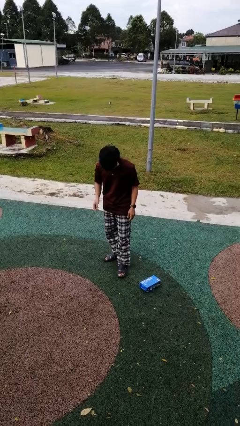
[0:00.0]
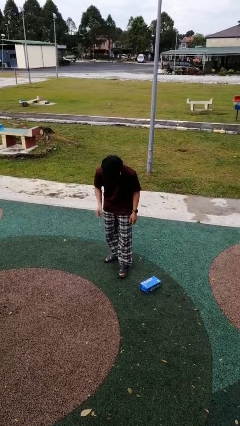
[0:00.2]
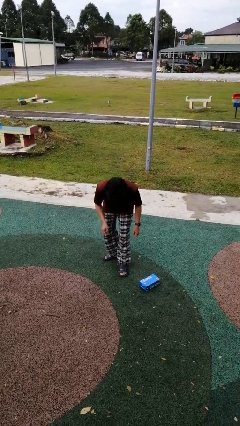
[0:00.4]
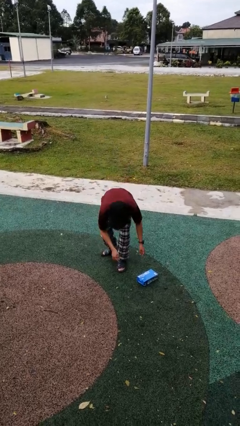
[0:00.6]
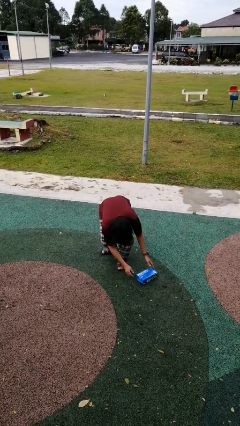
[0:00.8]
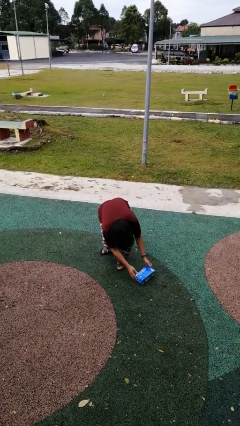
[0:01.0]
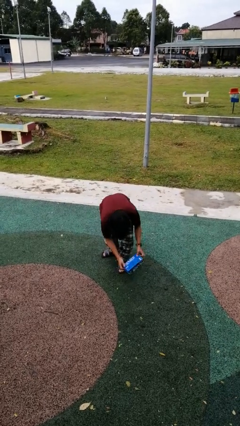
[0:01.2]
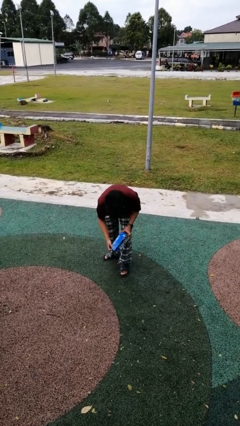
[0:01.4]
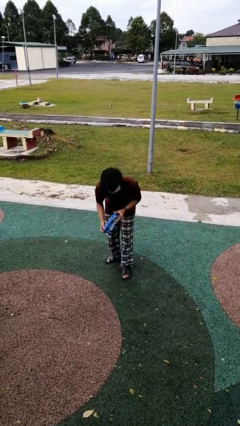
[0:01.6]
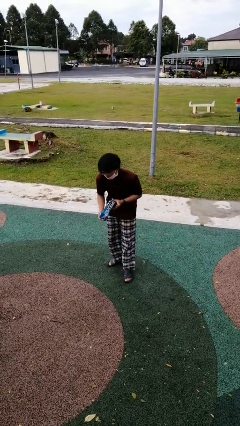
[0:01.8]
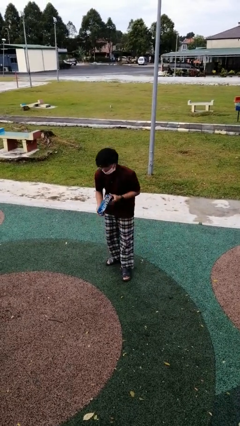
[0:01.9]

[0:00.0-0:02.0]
person picks up object from floor

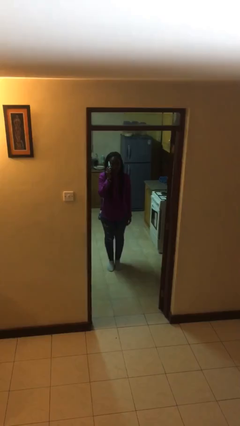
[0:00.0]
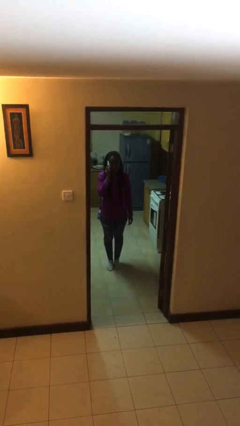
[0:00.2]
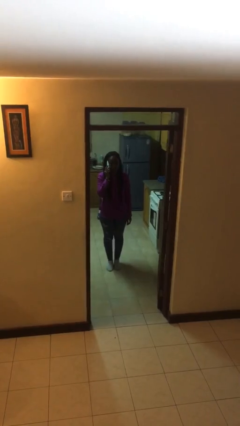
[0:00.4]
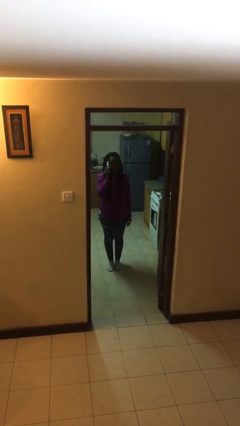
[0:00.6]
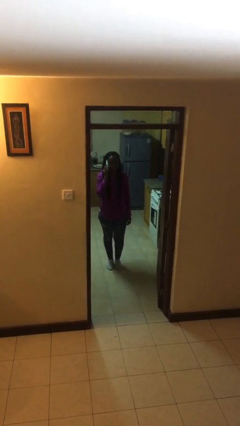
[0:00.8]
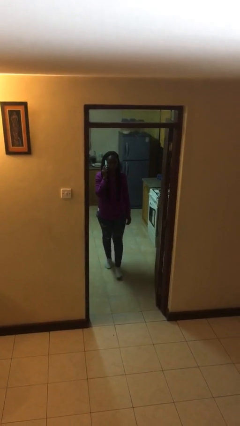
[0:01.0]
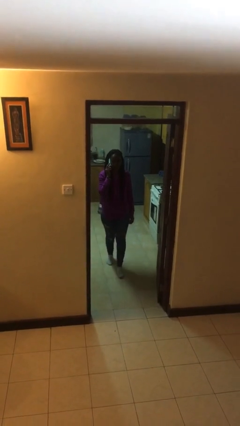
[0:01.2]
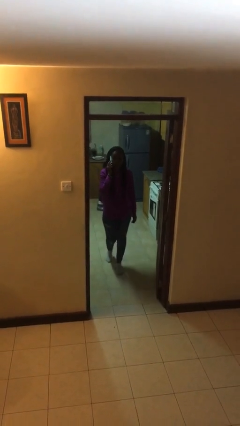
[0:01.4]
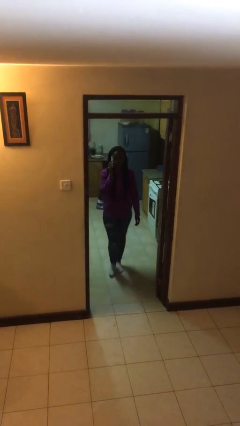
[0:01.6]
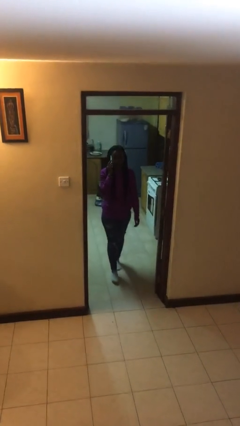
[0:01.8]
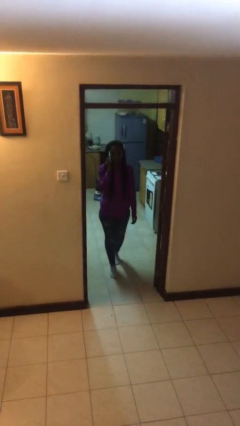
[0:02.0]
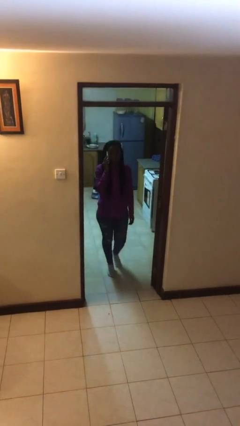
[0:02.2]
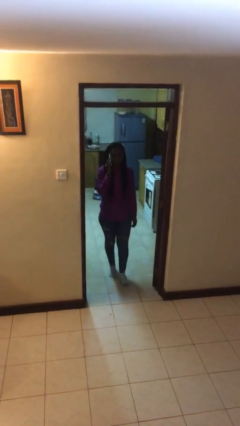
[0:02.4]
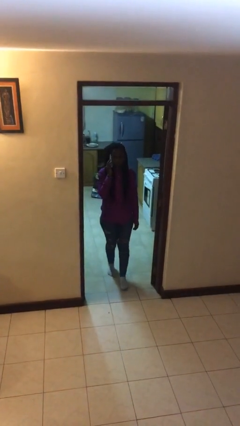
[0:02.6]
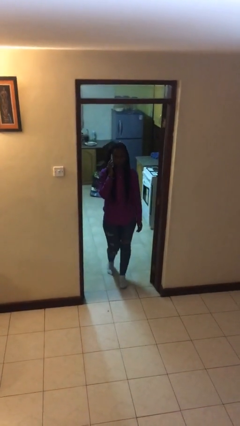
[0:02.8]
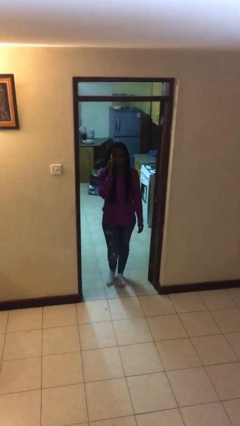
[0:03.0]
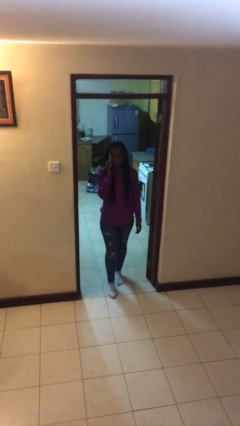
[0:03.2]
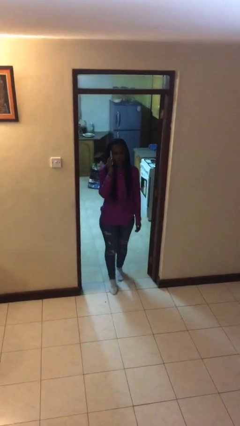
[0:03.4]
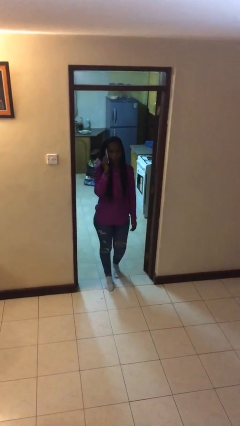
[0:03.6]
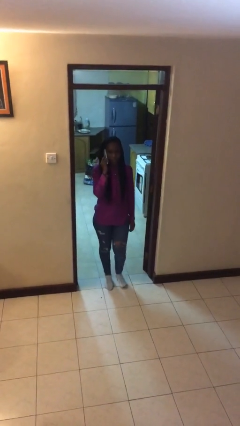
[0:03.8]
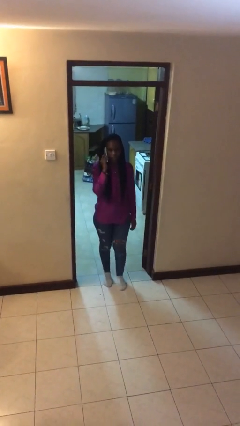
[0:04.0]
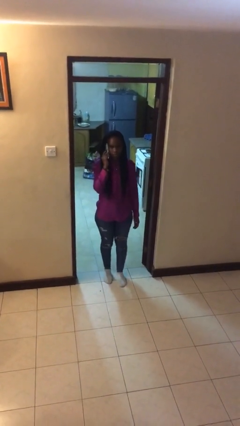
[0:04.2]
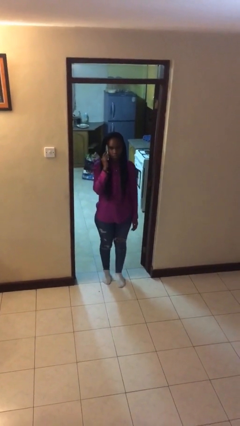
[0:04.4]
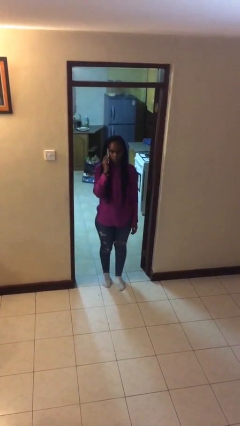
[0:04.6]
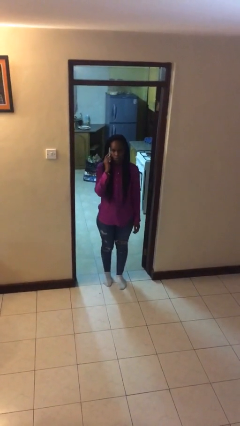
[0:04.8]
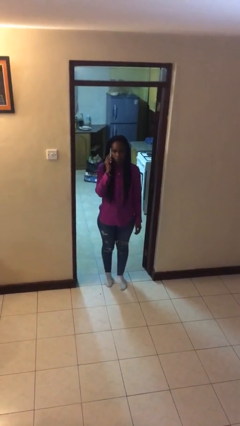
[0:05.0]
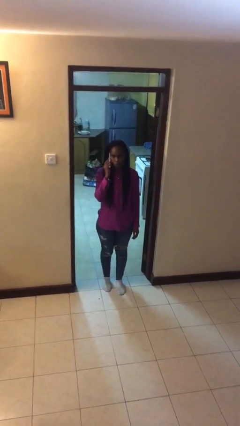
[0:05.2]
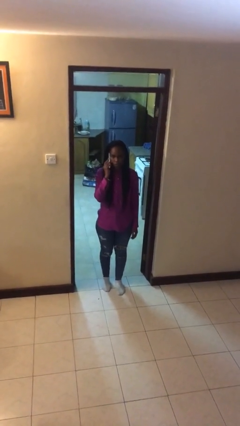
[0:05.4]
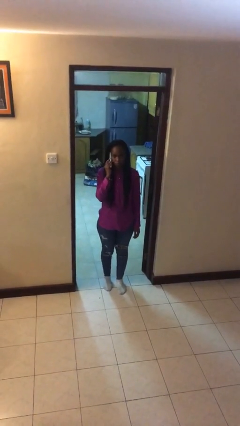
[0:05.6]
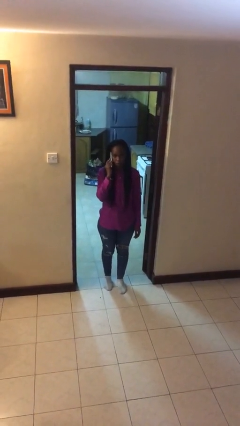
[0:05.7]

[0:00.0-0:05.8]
person enters scene through structure

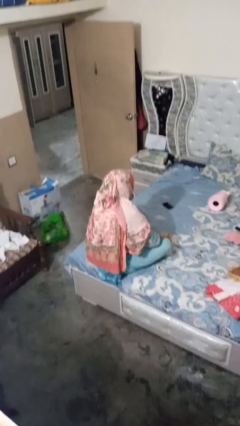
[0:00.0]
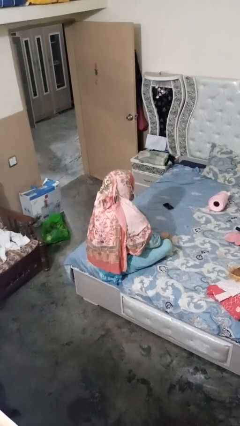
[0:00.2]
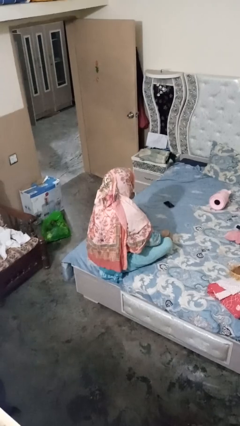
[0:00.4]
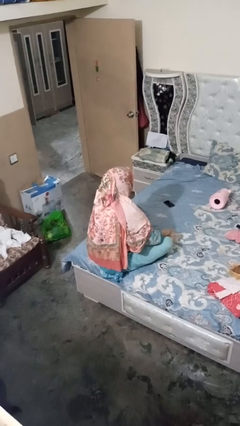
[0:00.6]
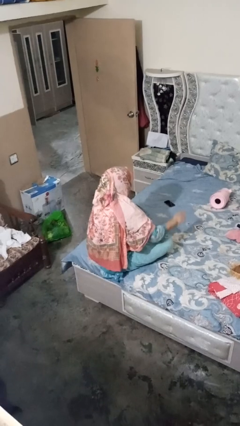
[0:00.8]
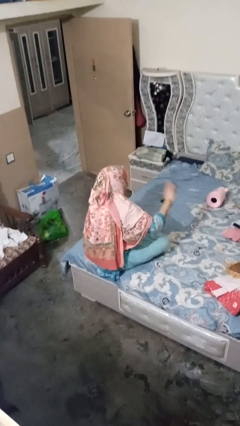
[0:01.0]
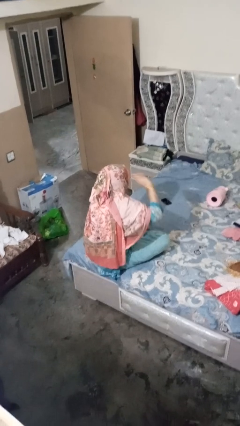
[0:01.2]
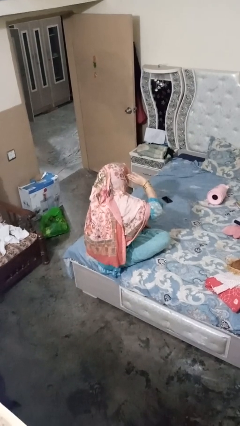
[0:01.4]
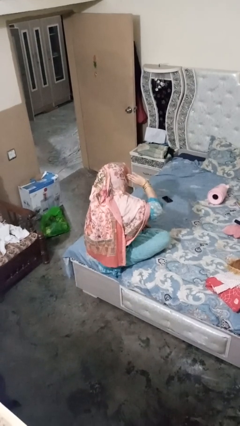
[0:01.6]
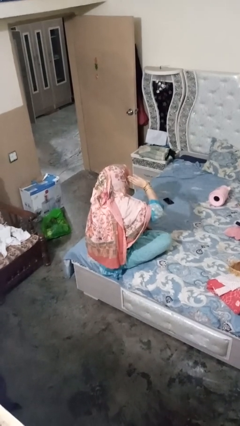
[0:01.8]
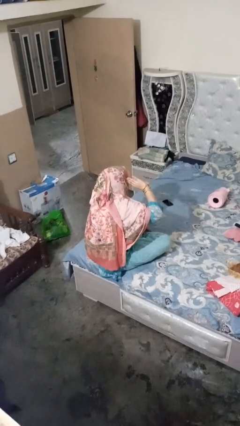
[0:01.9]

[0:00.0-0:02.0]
person salutes

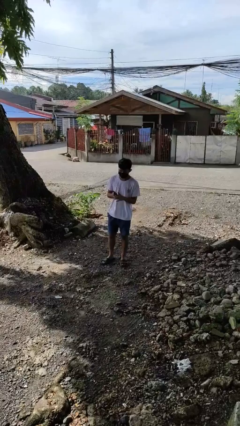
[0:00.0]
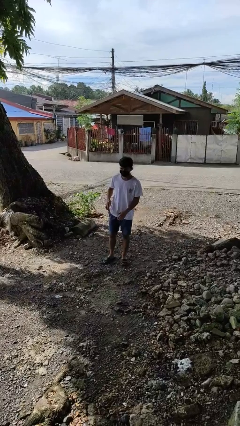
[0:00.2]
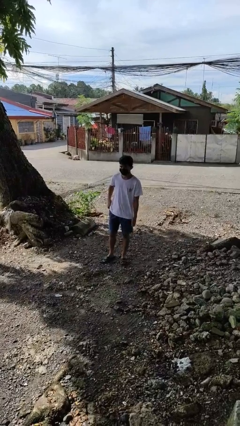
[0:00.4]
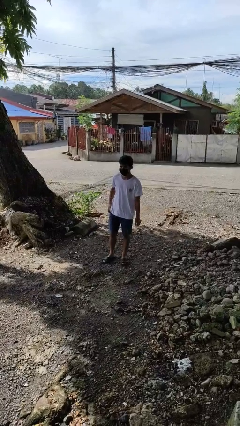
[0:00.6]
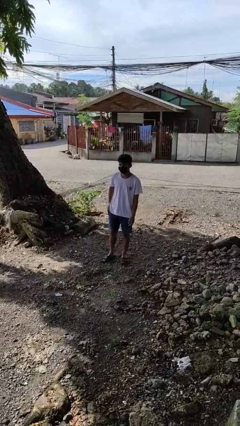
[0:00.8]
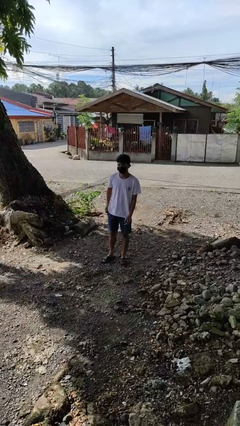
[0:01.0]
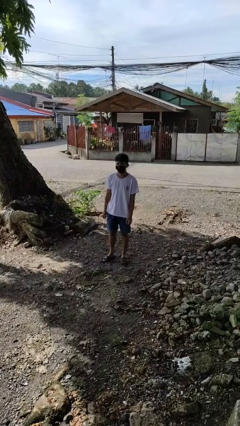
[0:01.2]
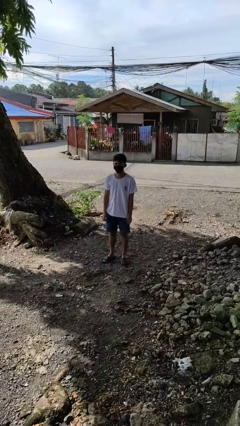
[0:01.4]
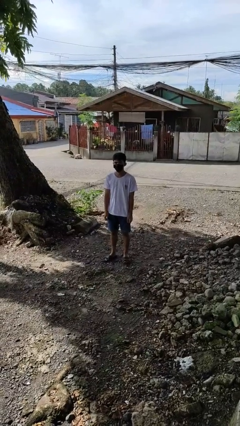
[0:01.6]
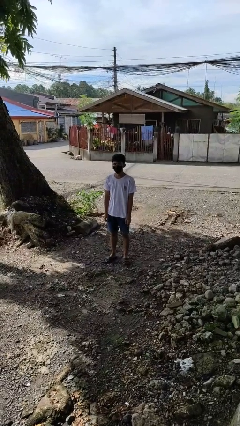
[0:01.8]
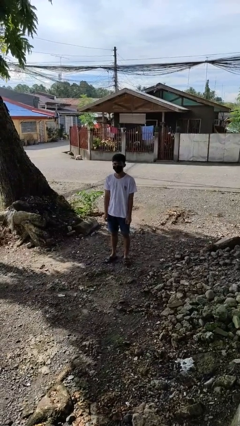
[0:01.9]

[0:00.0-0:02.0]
person puts phone into pocket

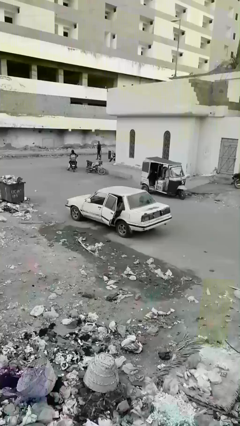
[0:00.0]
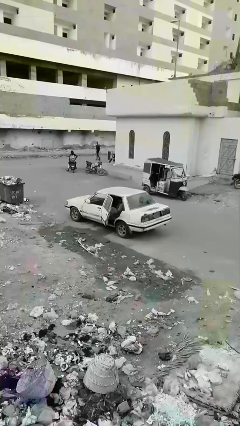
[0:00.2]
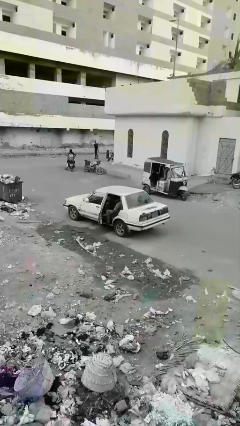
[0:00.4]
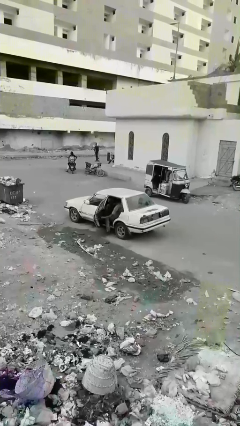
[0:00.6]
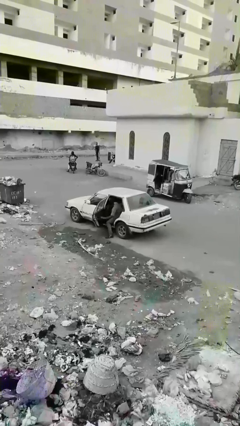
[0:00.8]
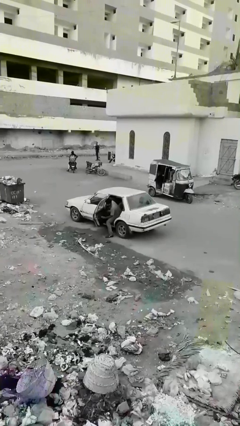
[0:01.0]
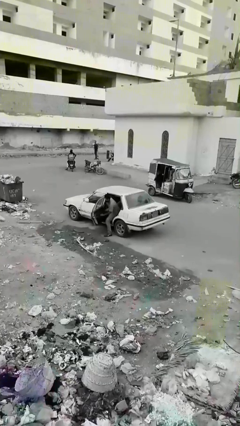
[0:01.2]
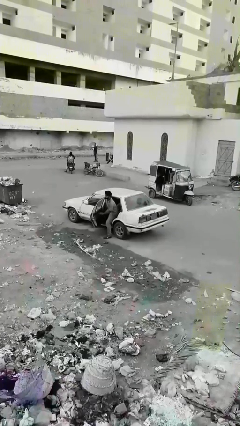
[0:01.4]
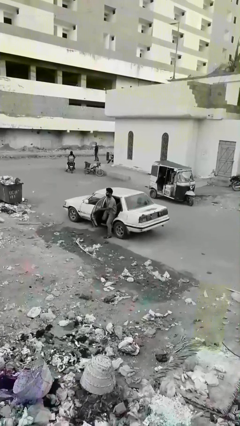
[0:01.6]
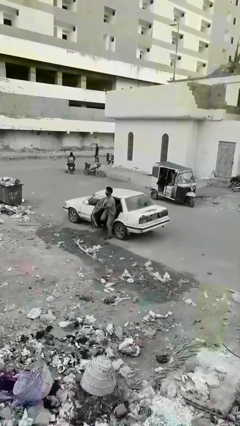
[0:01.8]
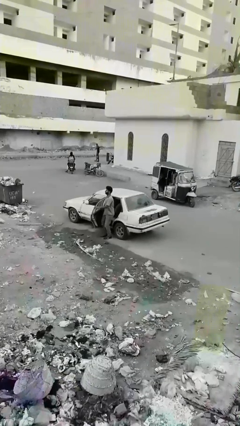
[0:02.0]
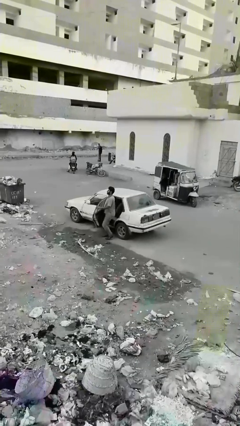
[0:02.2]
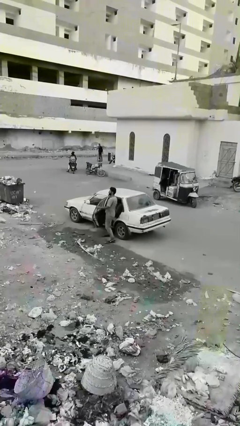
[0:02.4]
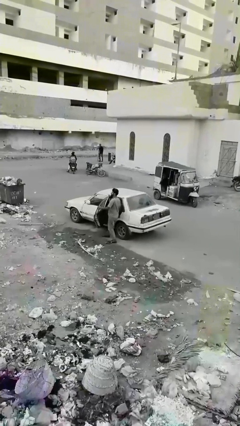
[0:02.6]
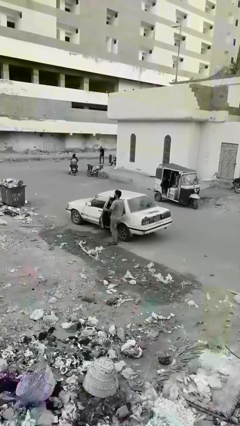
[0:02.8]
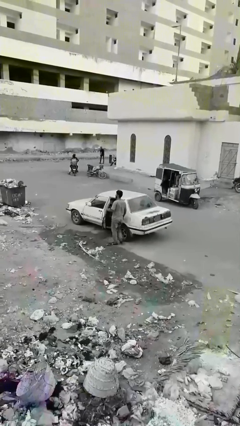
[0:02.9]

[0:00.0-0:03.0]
car drops off person

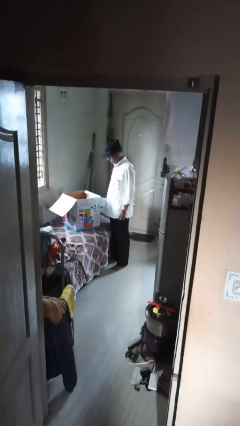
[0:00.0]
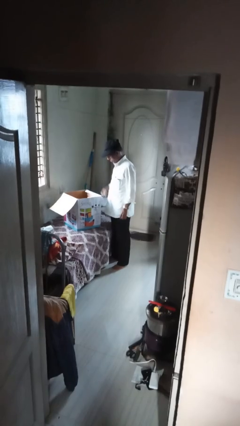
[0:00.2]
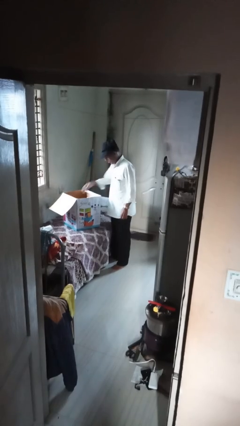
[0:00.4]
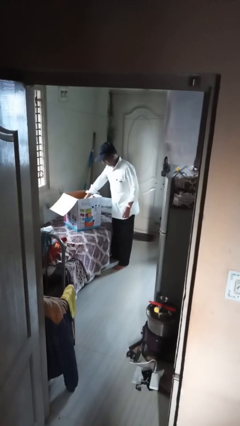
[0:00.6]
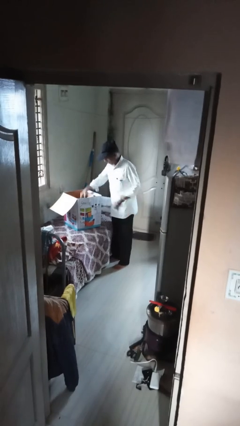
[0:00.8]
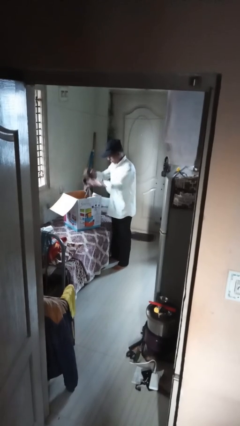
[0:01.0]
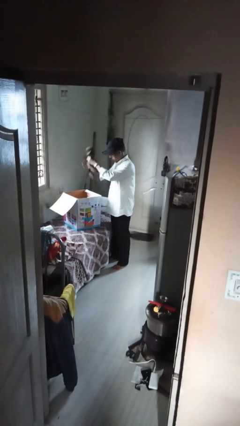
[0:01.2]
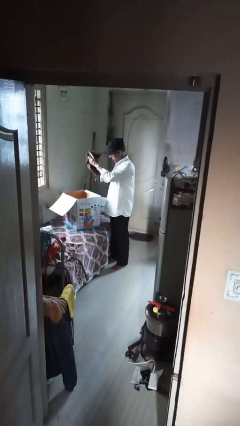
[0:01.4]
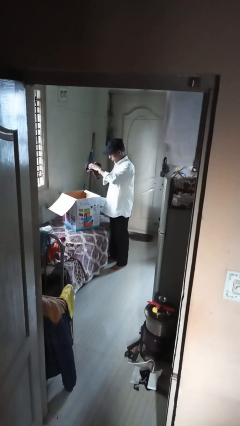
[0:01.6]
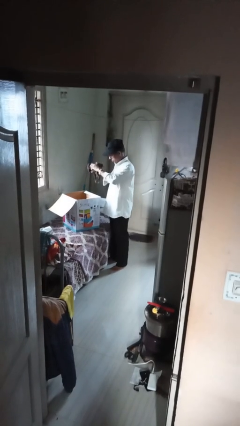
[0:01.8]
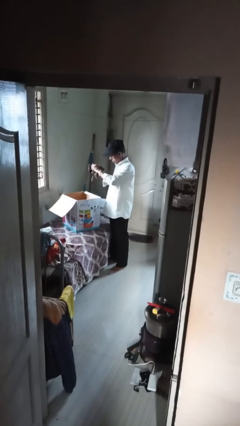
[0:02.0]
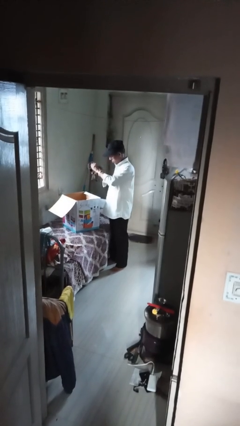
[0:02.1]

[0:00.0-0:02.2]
person takes object from box

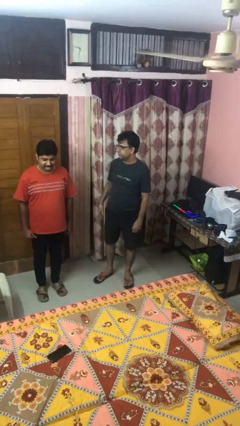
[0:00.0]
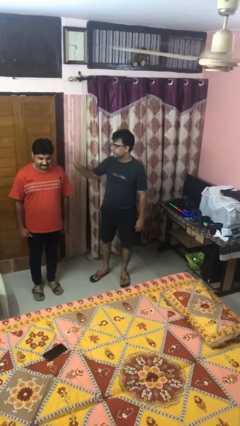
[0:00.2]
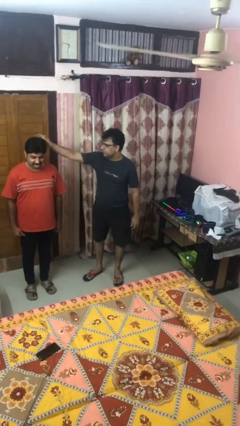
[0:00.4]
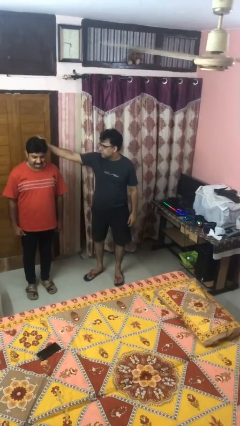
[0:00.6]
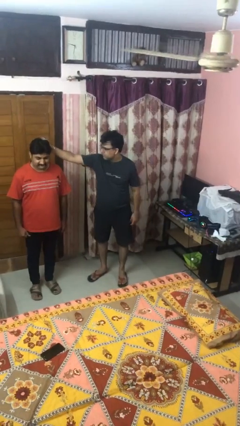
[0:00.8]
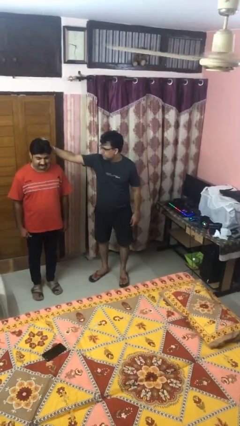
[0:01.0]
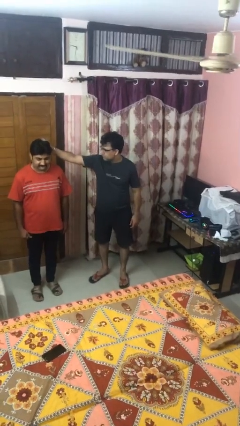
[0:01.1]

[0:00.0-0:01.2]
person grabs person by hair
